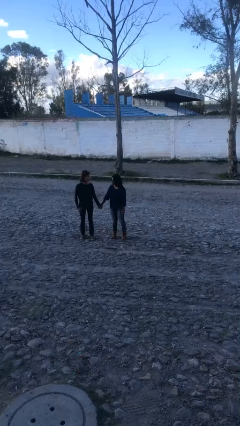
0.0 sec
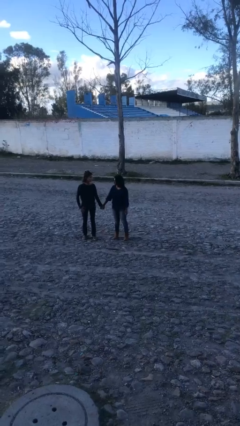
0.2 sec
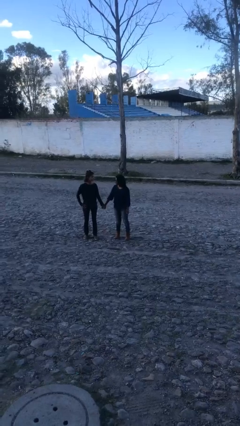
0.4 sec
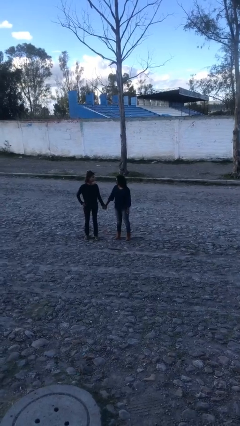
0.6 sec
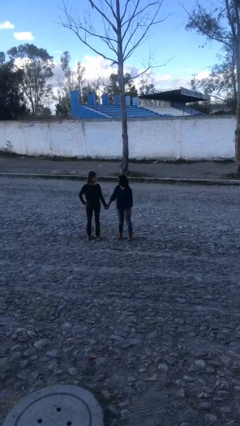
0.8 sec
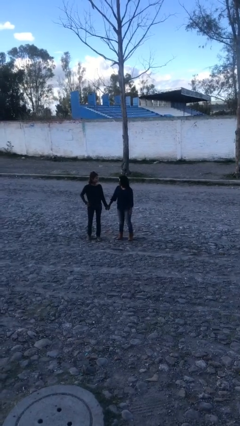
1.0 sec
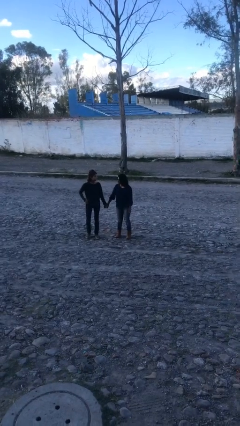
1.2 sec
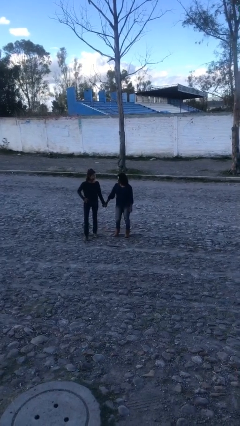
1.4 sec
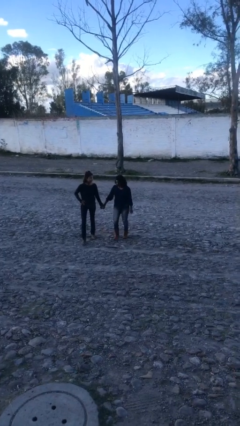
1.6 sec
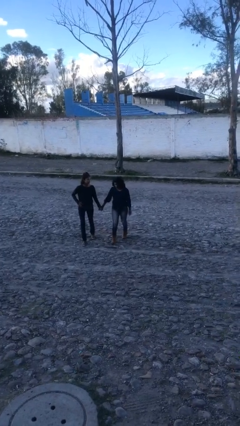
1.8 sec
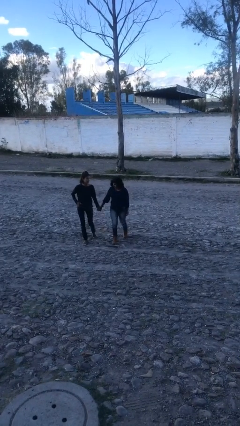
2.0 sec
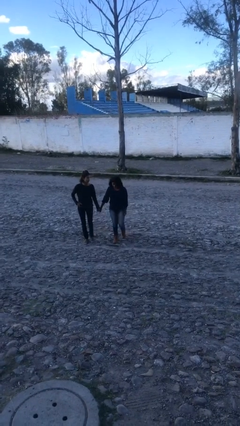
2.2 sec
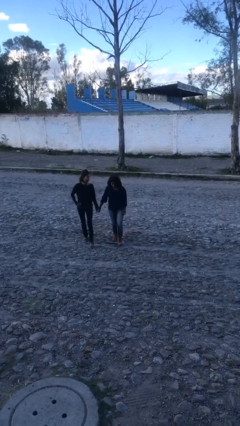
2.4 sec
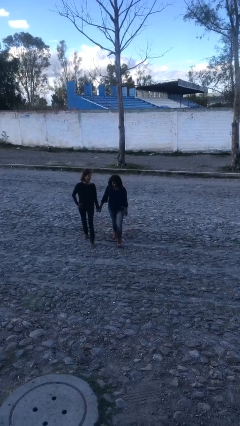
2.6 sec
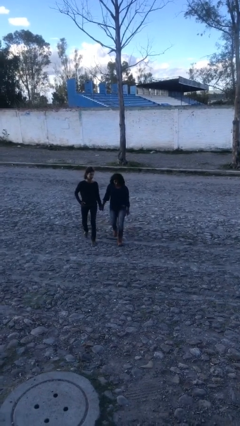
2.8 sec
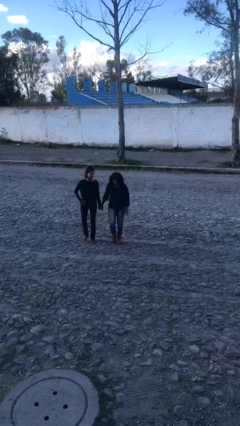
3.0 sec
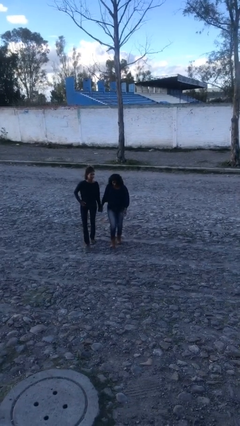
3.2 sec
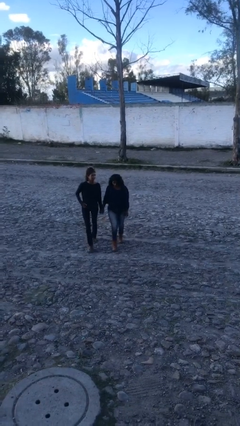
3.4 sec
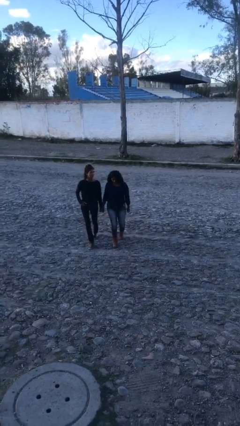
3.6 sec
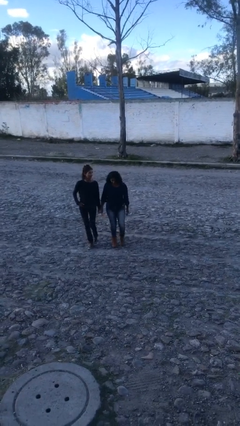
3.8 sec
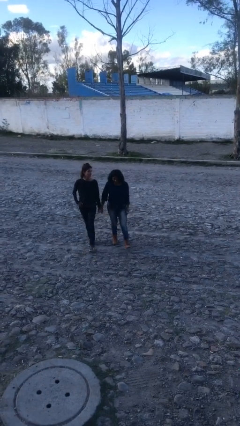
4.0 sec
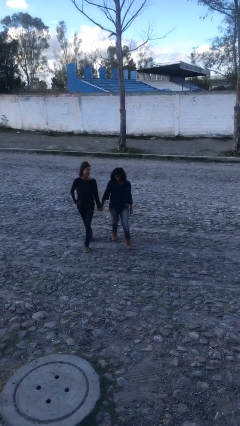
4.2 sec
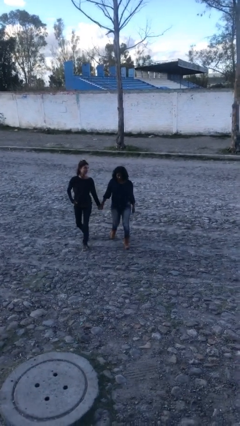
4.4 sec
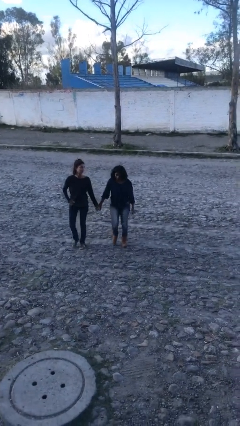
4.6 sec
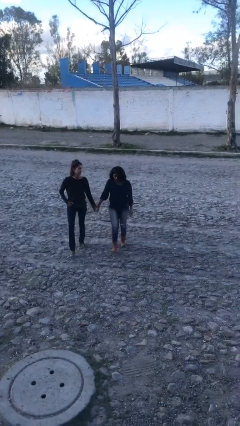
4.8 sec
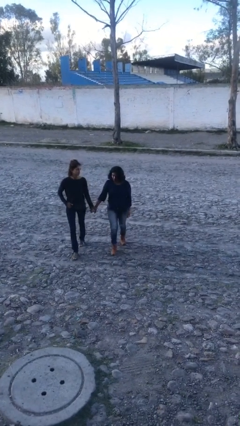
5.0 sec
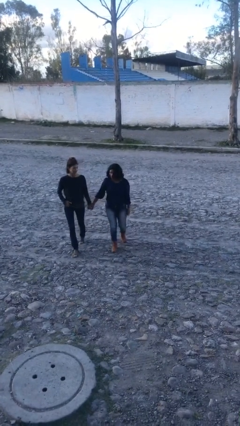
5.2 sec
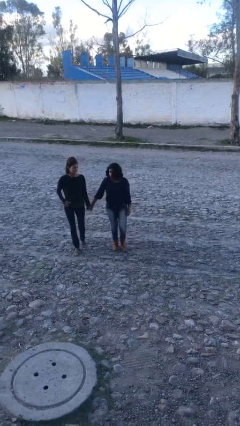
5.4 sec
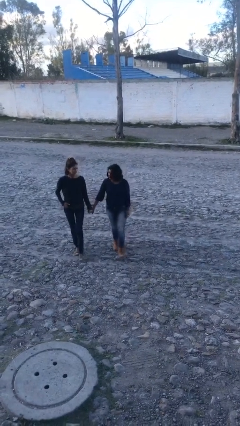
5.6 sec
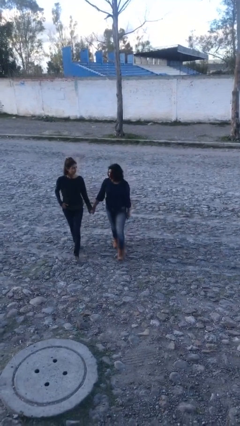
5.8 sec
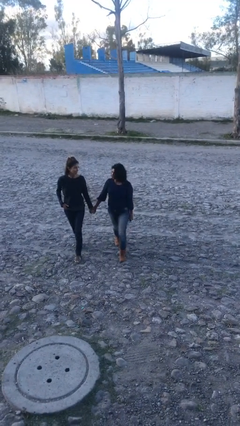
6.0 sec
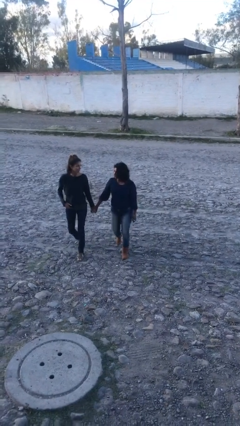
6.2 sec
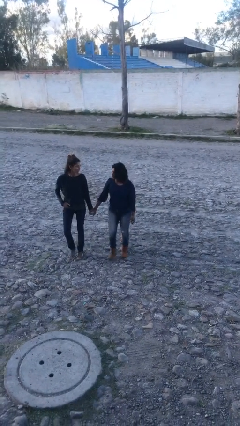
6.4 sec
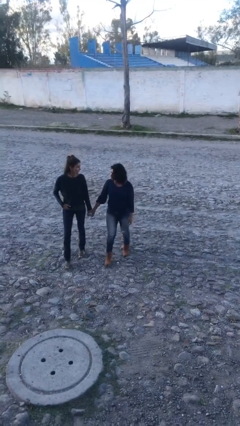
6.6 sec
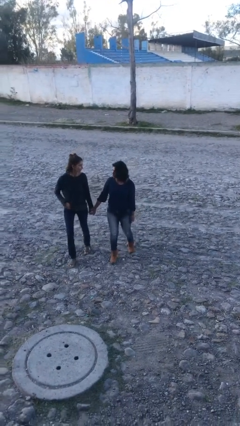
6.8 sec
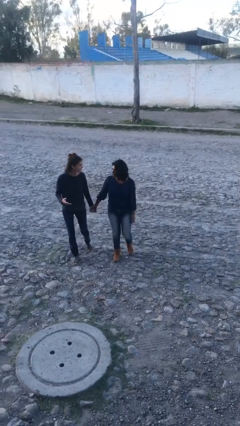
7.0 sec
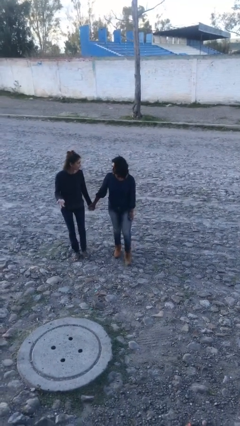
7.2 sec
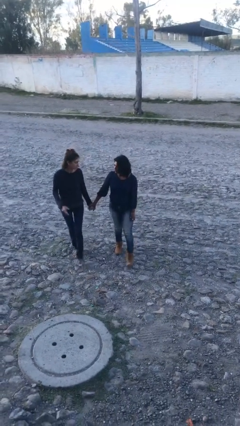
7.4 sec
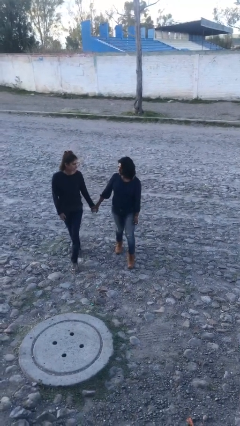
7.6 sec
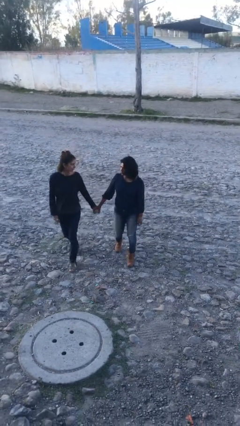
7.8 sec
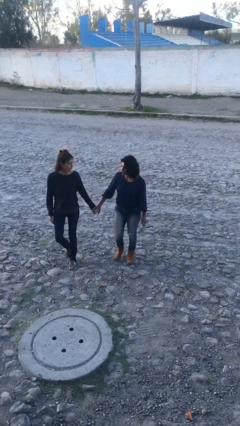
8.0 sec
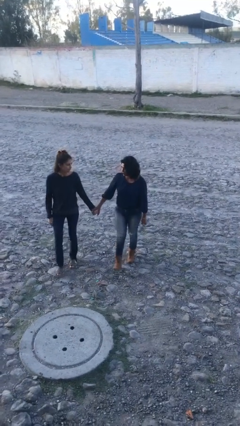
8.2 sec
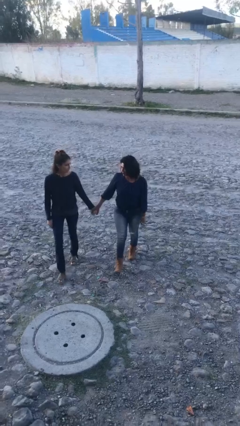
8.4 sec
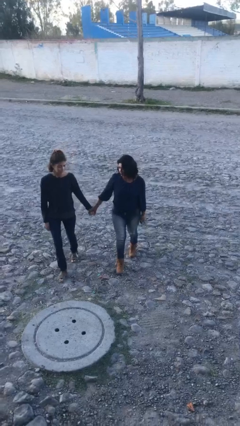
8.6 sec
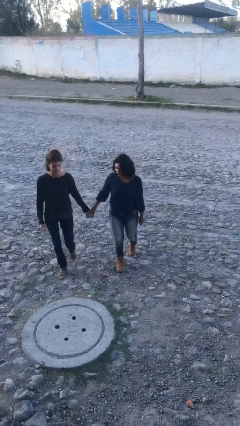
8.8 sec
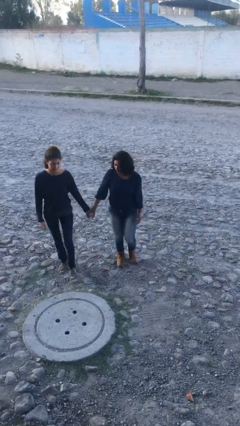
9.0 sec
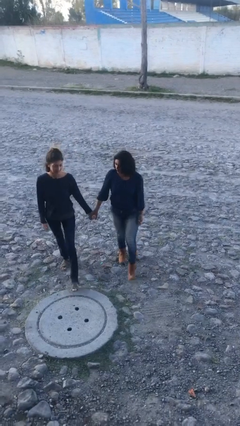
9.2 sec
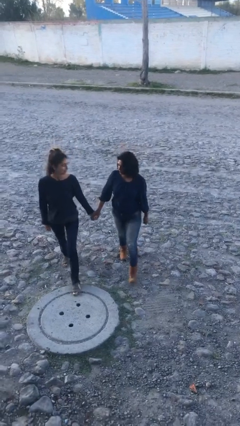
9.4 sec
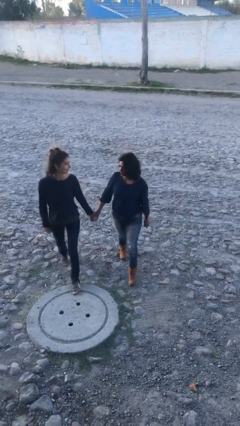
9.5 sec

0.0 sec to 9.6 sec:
person holds hand

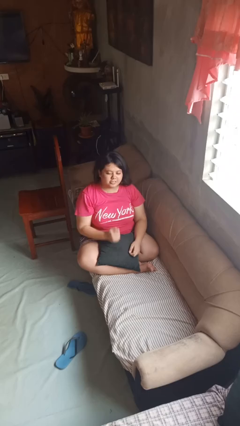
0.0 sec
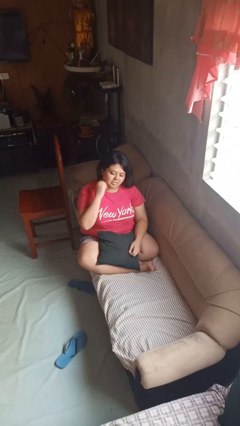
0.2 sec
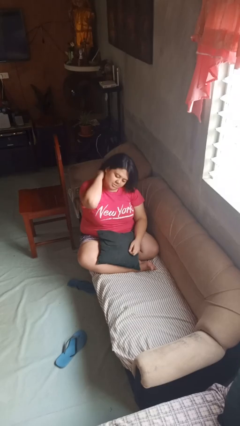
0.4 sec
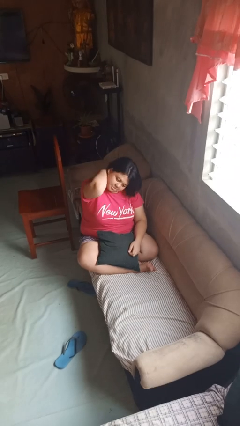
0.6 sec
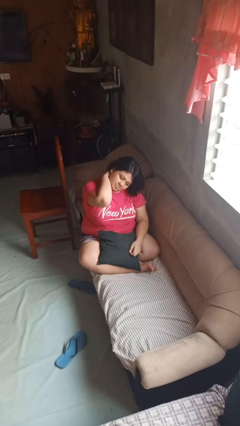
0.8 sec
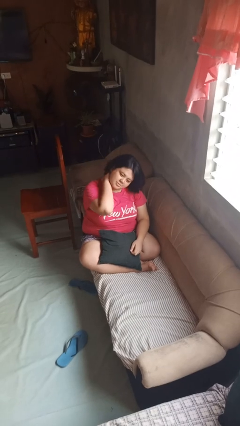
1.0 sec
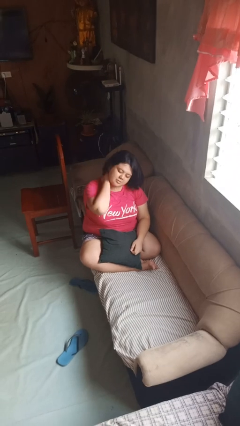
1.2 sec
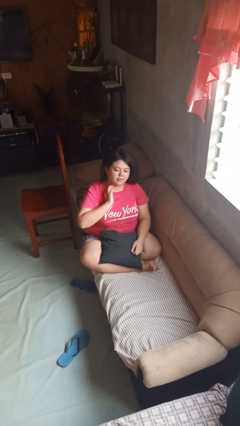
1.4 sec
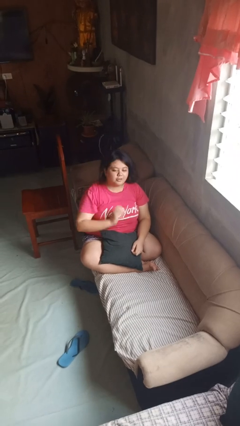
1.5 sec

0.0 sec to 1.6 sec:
person rubs neck

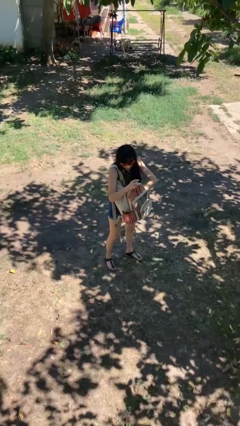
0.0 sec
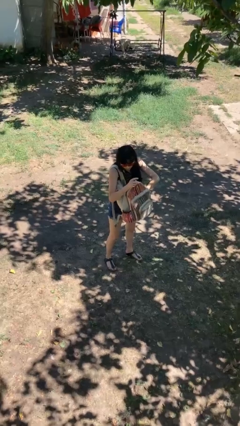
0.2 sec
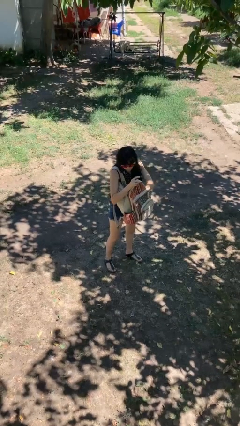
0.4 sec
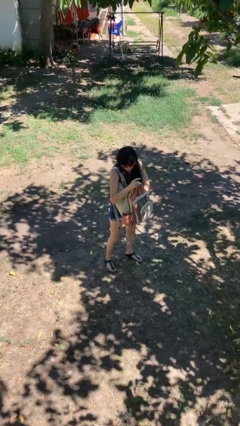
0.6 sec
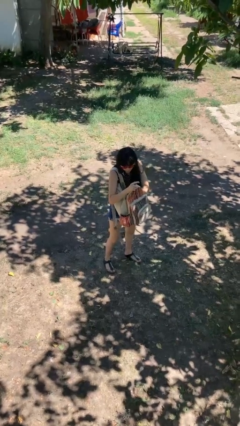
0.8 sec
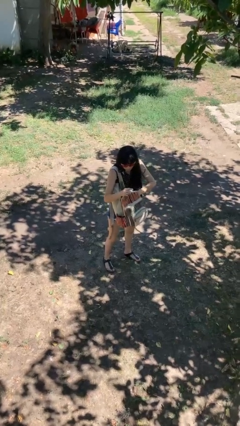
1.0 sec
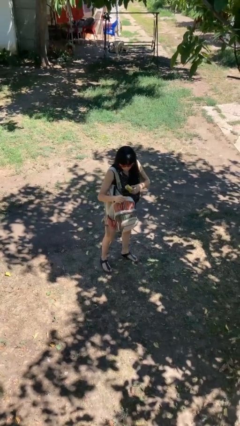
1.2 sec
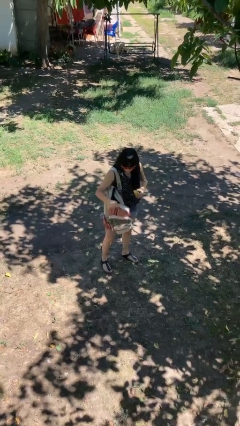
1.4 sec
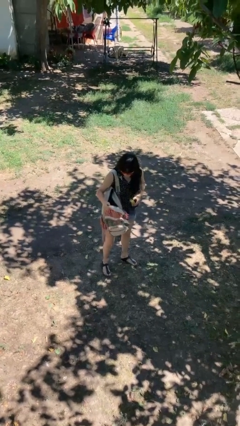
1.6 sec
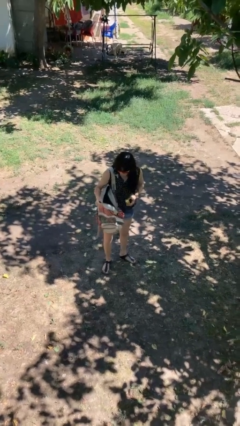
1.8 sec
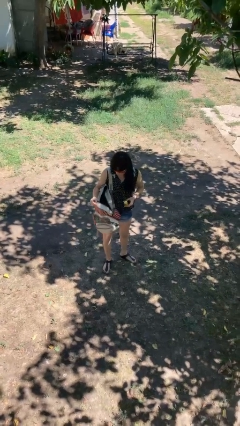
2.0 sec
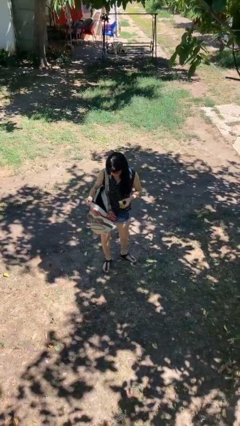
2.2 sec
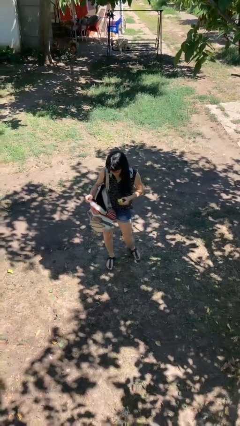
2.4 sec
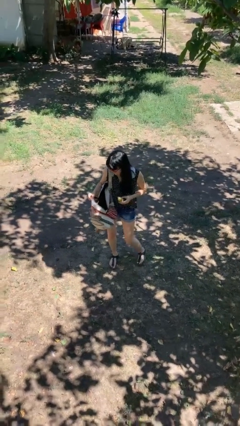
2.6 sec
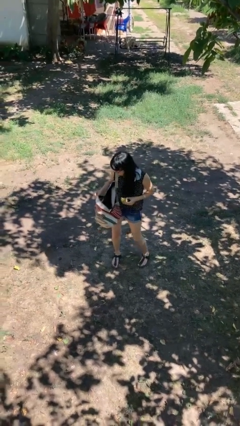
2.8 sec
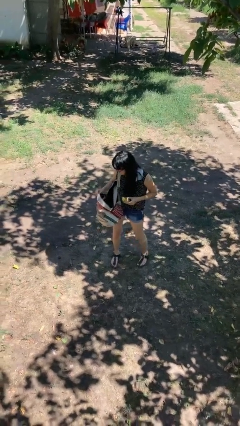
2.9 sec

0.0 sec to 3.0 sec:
person takes object from backpack

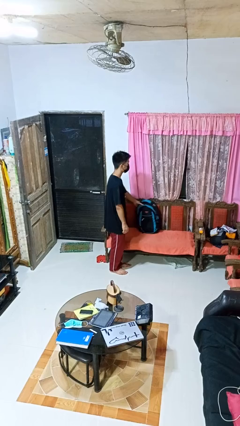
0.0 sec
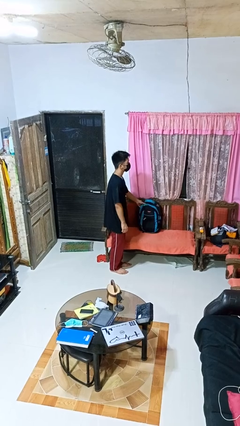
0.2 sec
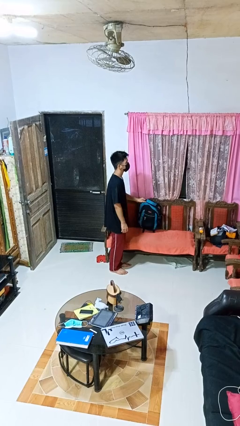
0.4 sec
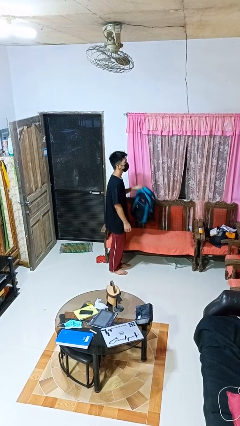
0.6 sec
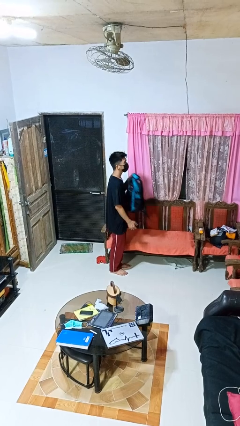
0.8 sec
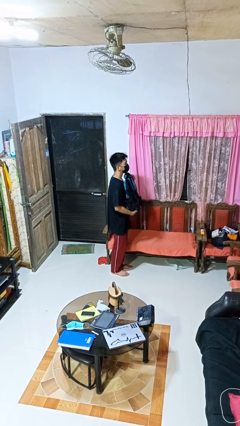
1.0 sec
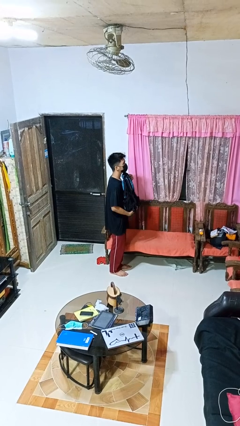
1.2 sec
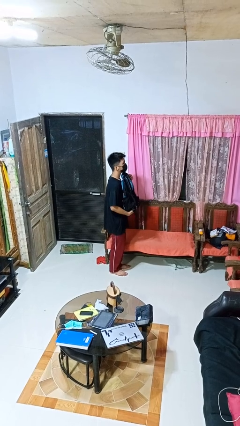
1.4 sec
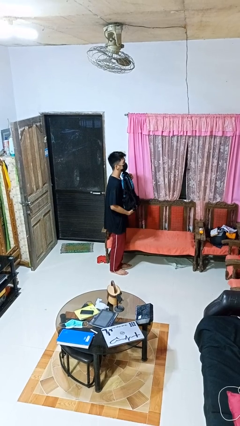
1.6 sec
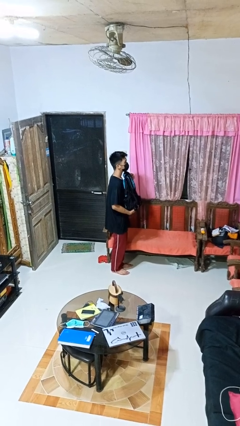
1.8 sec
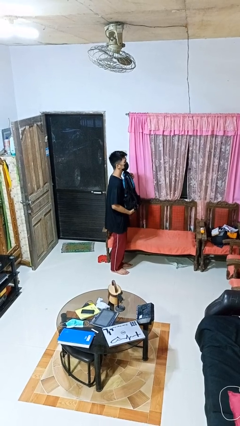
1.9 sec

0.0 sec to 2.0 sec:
person picks up object from couch

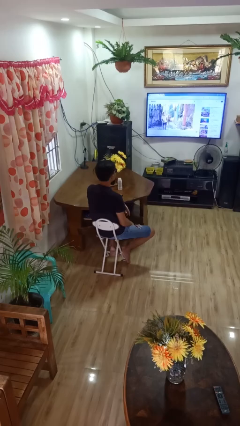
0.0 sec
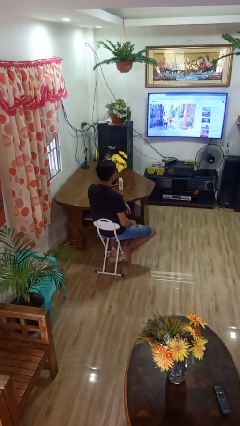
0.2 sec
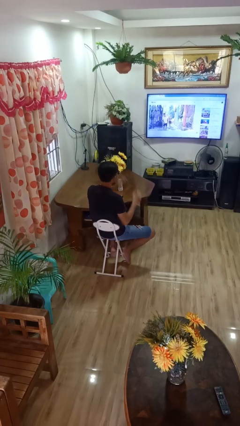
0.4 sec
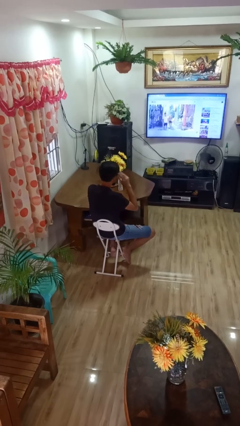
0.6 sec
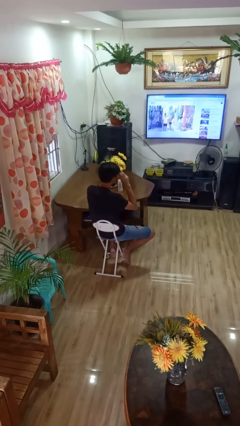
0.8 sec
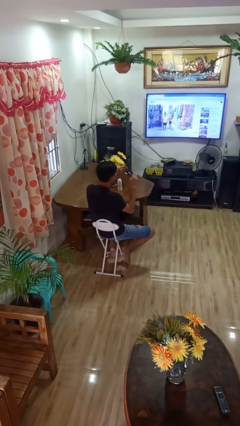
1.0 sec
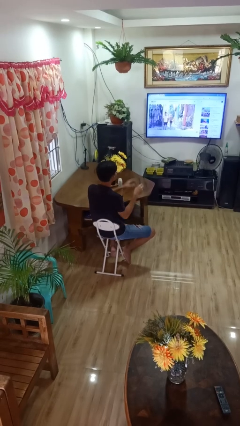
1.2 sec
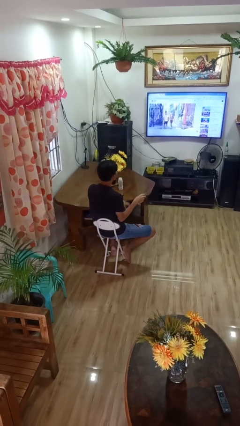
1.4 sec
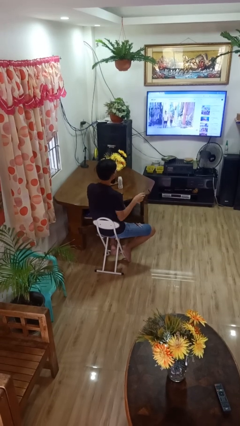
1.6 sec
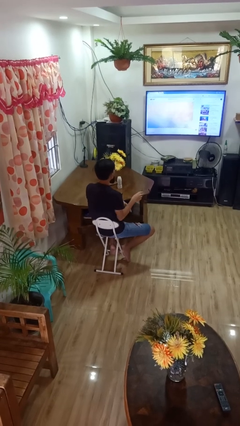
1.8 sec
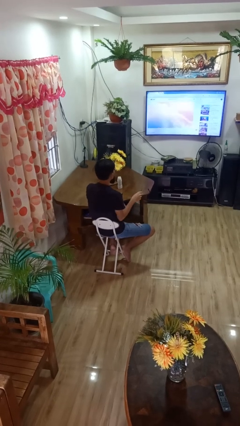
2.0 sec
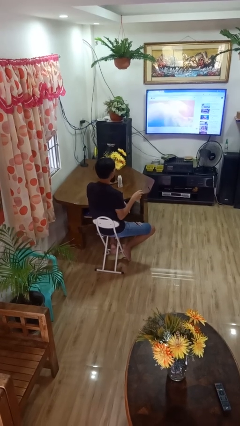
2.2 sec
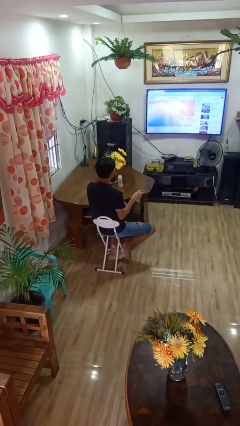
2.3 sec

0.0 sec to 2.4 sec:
person takes off sunglasses
